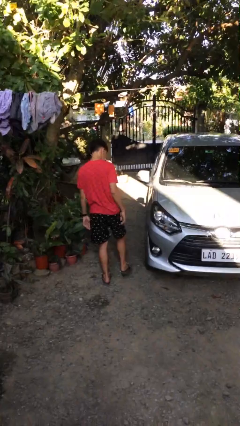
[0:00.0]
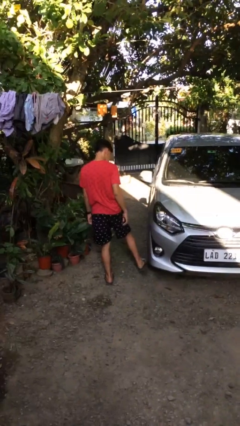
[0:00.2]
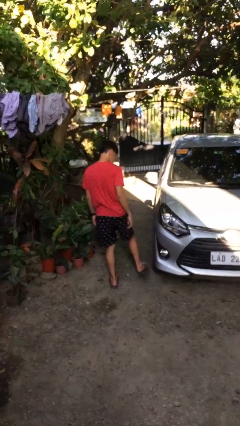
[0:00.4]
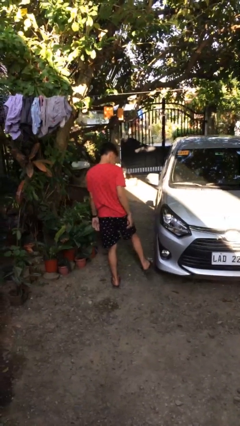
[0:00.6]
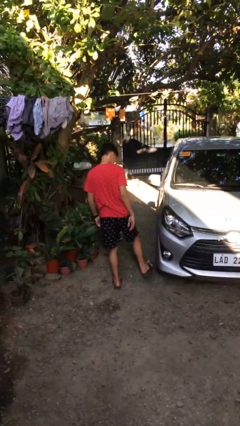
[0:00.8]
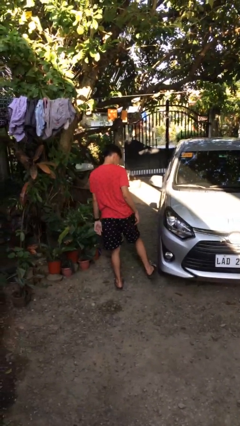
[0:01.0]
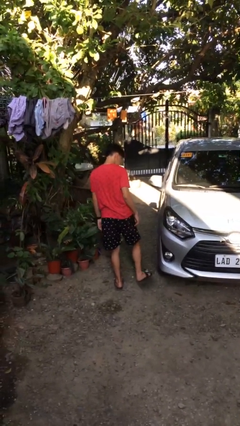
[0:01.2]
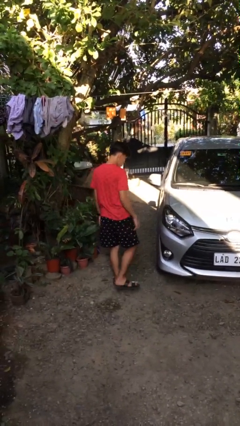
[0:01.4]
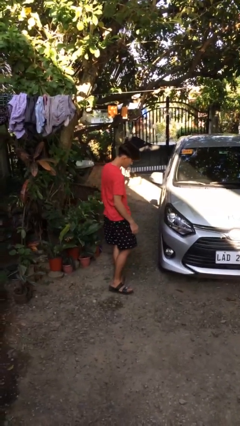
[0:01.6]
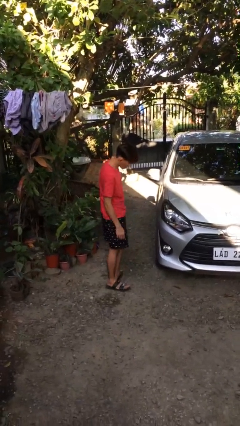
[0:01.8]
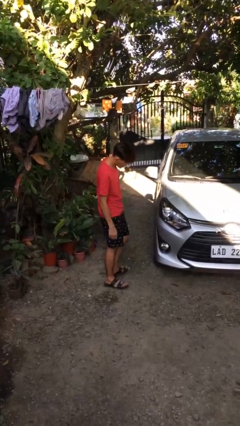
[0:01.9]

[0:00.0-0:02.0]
person kicks car tires

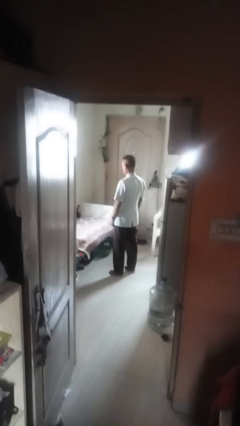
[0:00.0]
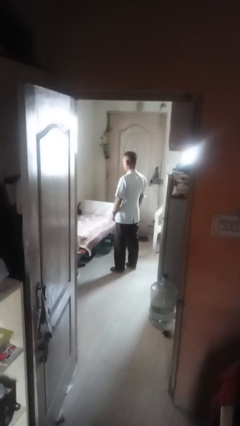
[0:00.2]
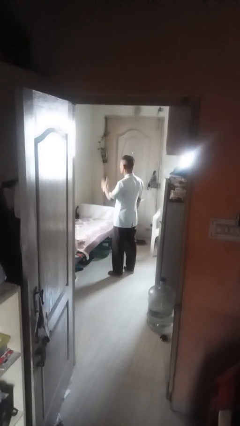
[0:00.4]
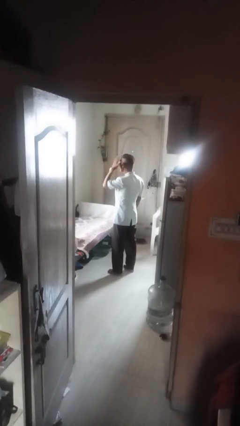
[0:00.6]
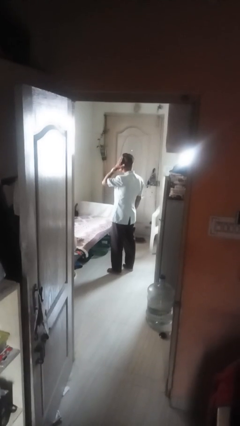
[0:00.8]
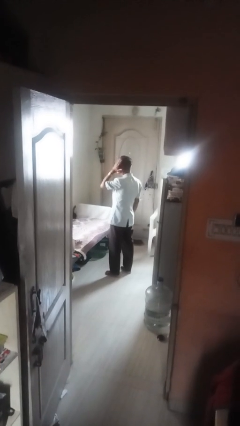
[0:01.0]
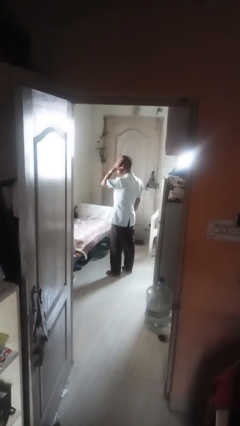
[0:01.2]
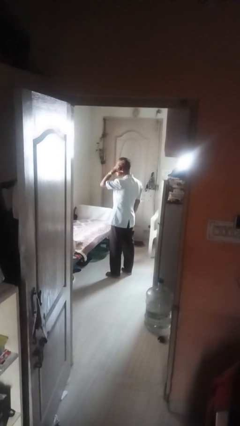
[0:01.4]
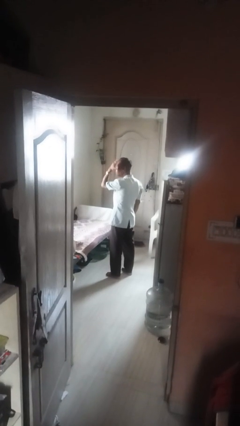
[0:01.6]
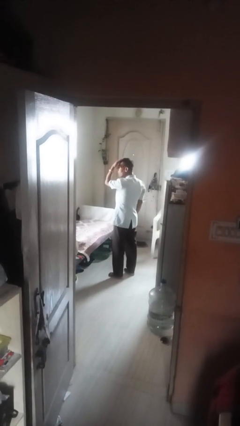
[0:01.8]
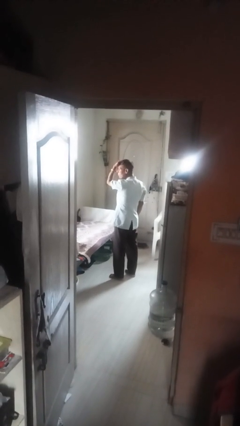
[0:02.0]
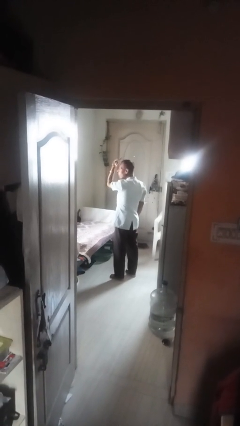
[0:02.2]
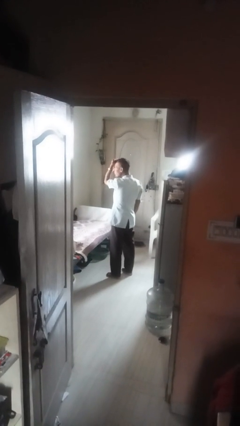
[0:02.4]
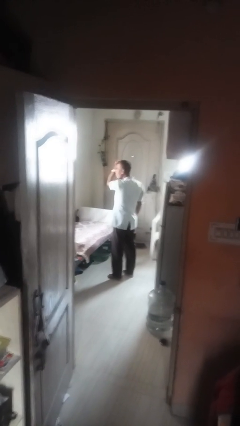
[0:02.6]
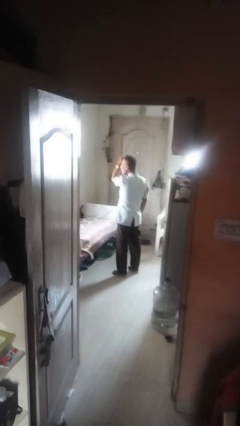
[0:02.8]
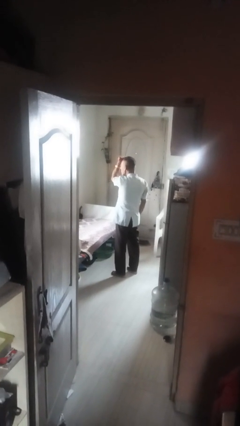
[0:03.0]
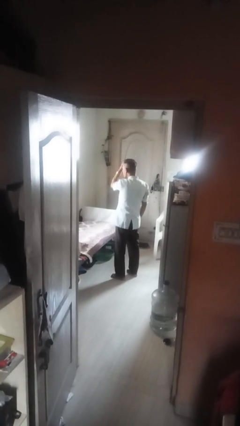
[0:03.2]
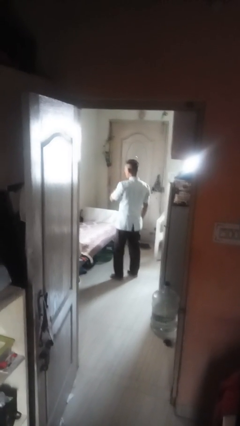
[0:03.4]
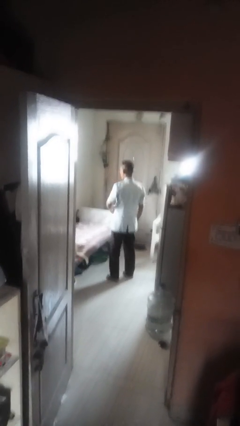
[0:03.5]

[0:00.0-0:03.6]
person strokes hair

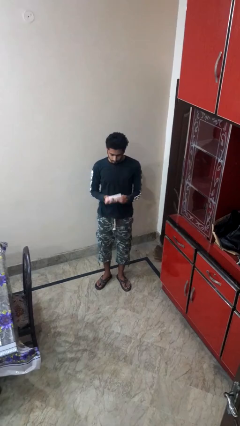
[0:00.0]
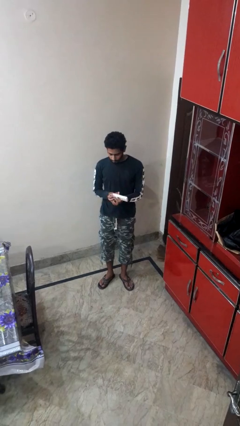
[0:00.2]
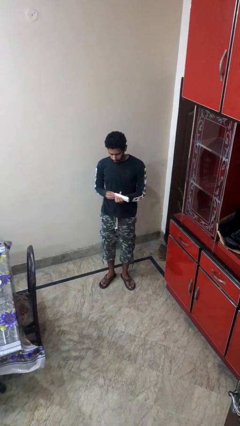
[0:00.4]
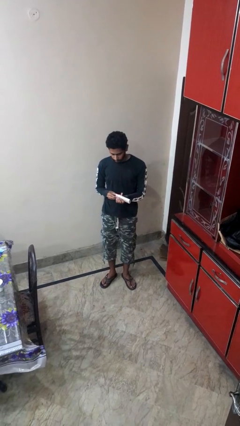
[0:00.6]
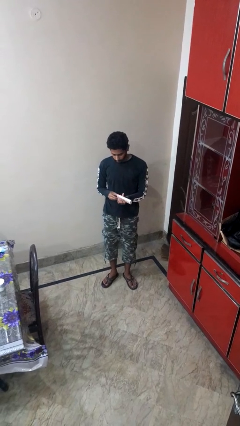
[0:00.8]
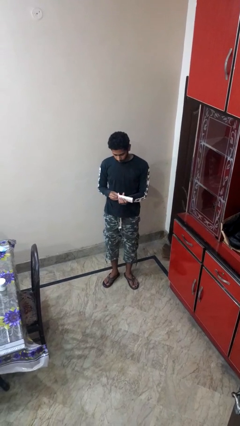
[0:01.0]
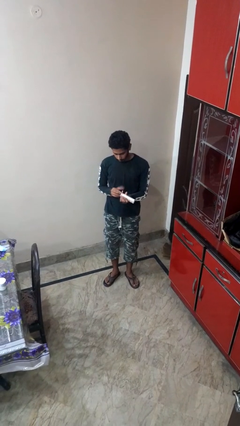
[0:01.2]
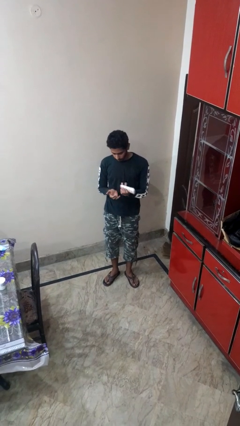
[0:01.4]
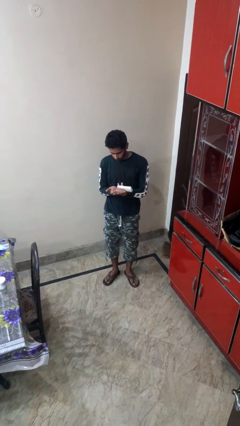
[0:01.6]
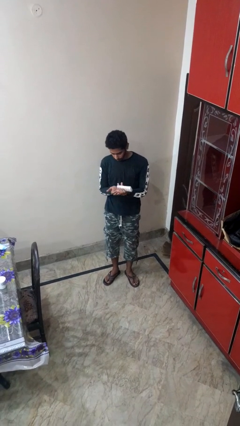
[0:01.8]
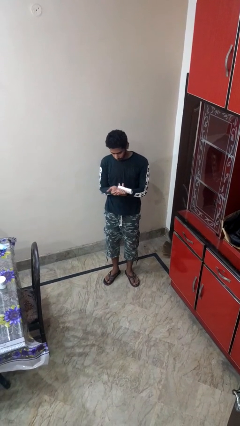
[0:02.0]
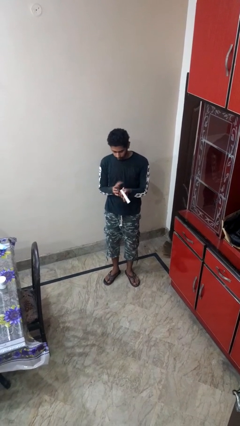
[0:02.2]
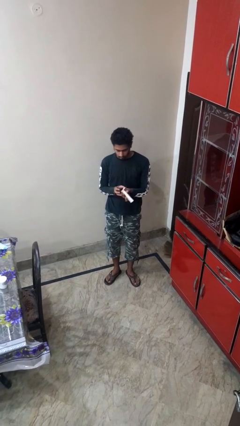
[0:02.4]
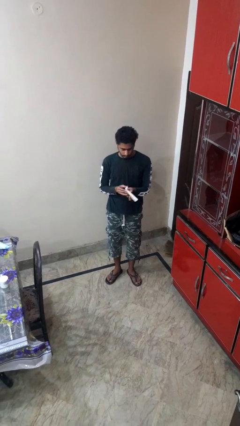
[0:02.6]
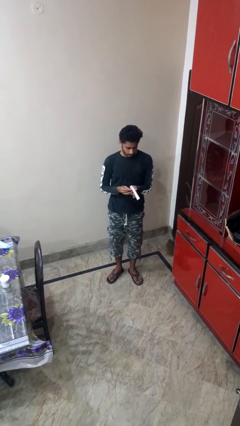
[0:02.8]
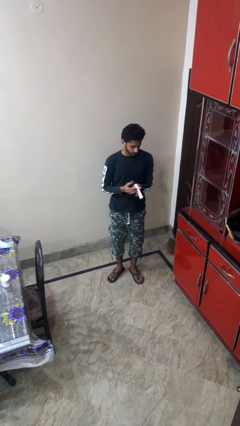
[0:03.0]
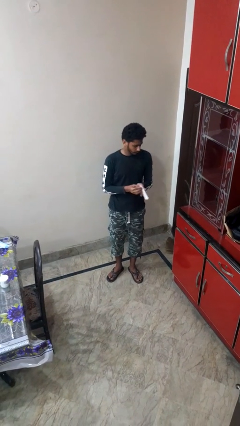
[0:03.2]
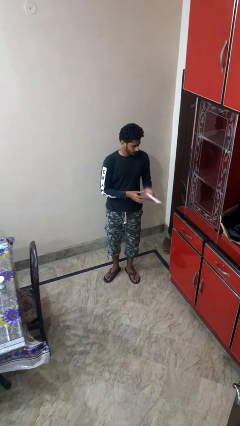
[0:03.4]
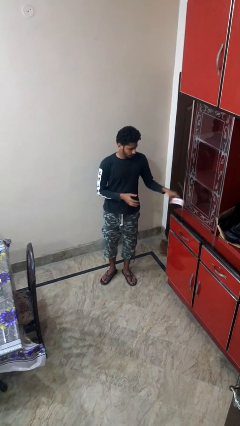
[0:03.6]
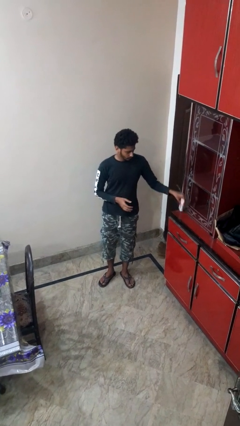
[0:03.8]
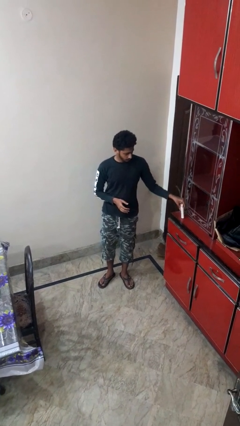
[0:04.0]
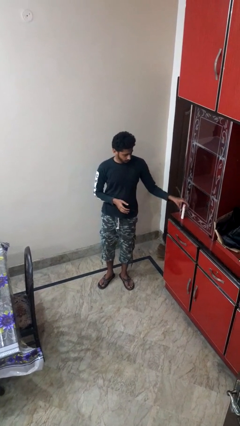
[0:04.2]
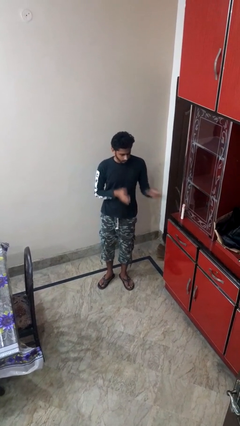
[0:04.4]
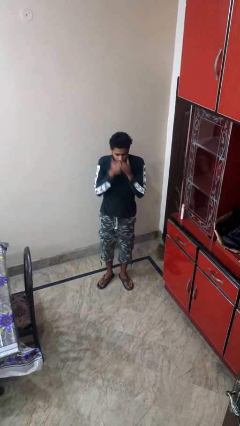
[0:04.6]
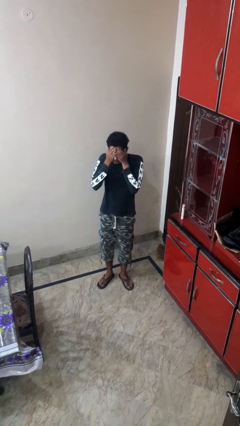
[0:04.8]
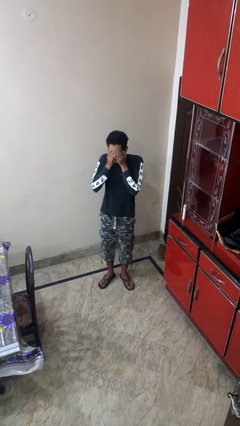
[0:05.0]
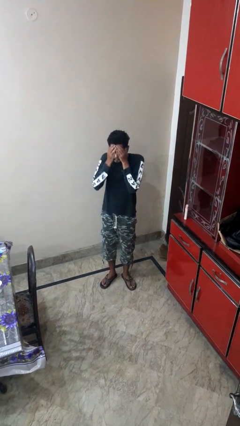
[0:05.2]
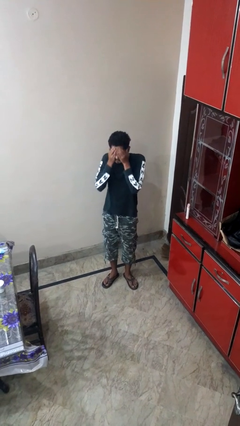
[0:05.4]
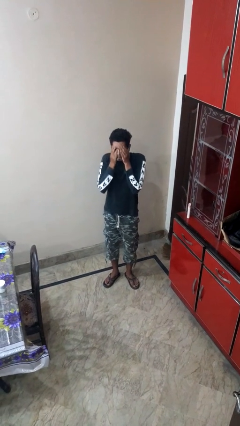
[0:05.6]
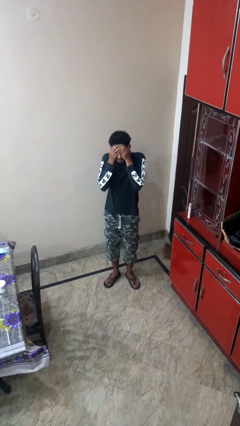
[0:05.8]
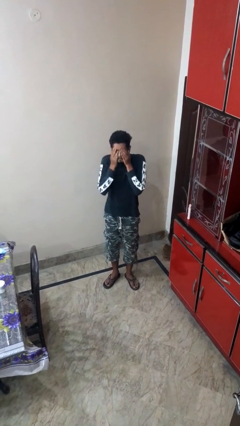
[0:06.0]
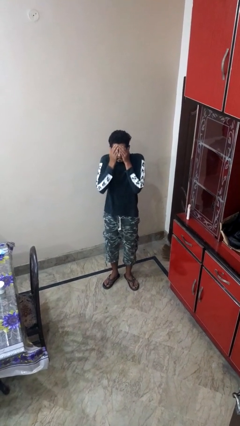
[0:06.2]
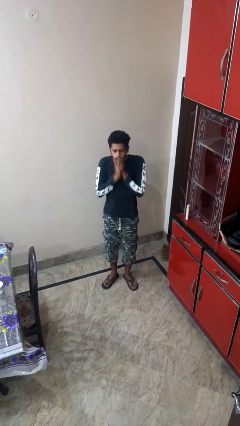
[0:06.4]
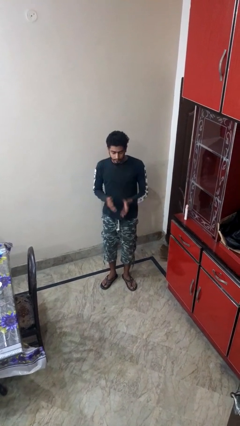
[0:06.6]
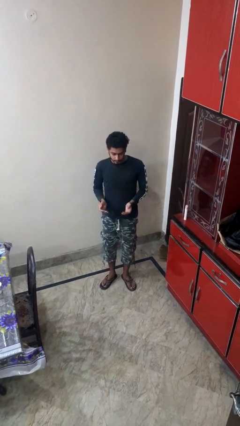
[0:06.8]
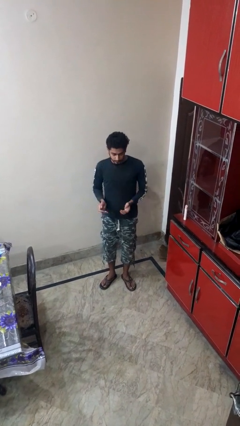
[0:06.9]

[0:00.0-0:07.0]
person applies facial moisturizer

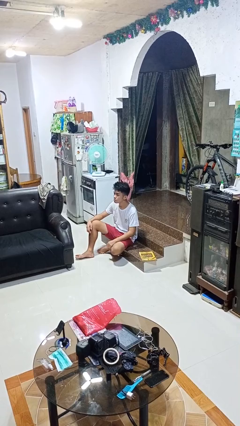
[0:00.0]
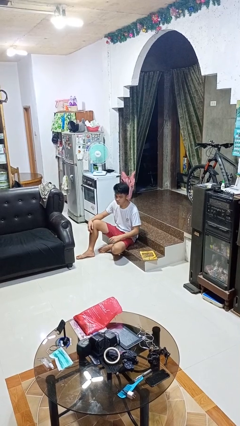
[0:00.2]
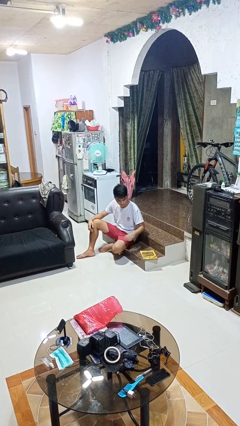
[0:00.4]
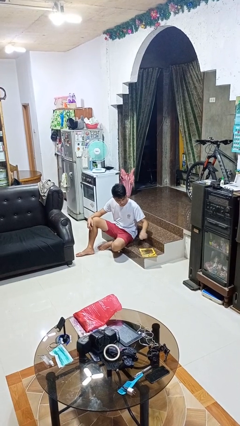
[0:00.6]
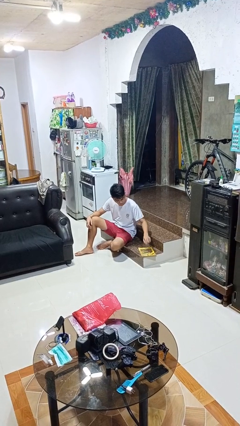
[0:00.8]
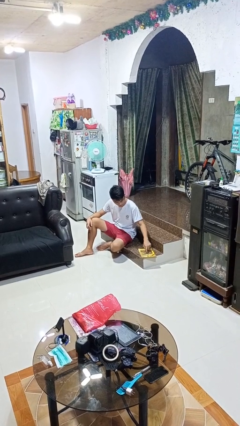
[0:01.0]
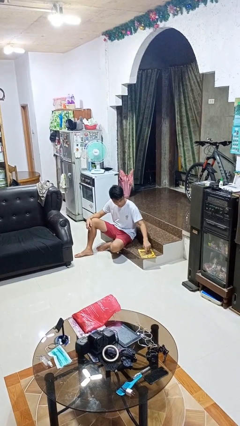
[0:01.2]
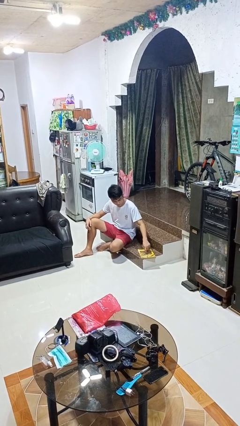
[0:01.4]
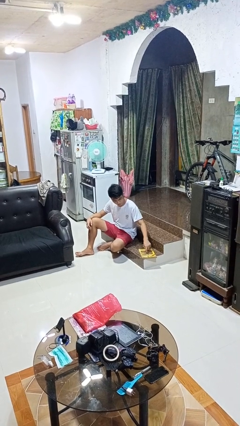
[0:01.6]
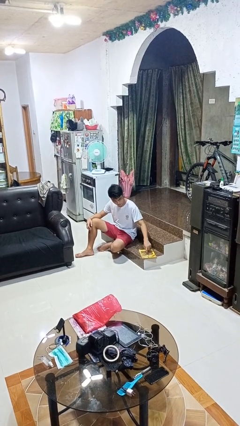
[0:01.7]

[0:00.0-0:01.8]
person taps object with finger

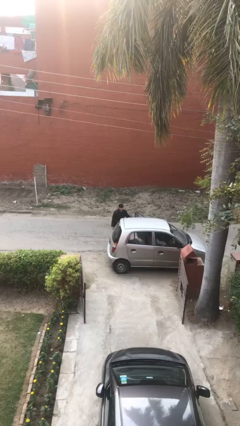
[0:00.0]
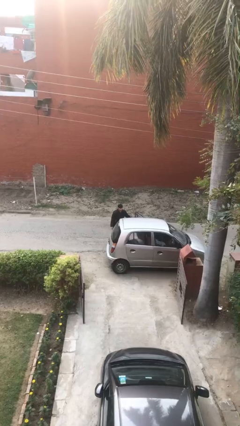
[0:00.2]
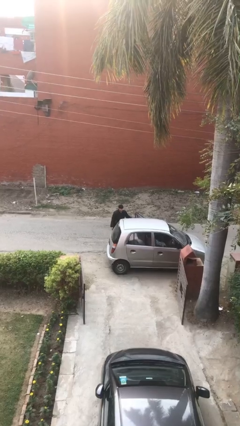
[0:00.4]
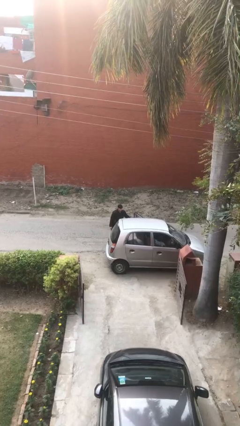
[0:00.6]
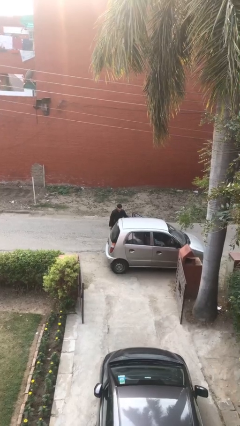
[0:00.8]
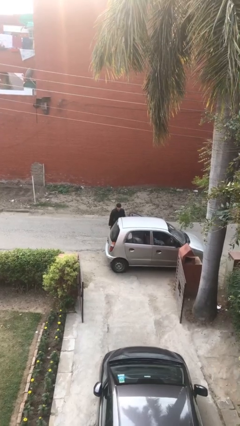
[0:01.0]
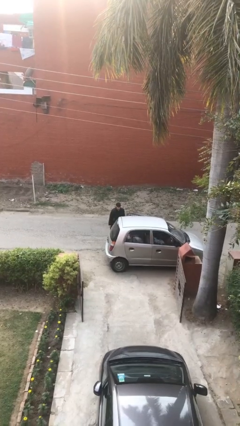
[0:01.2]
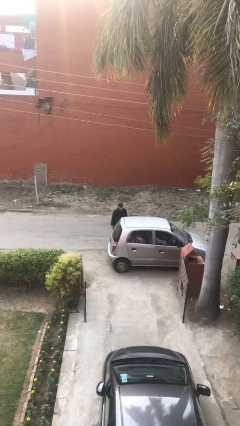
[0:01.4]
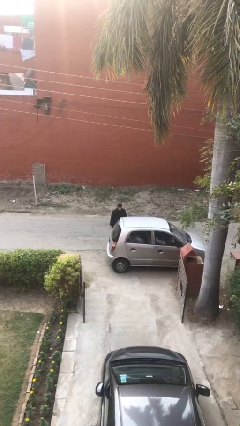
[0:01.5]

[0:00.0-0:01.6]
person closes car door

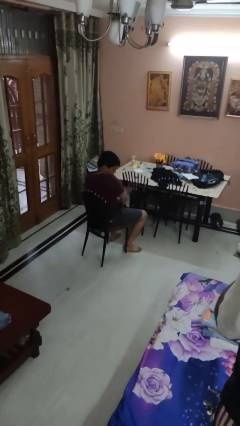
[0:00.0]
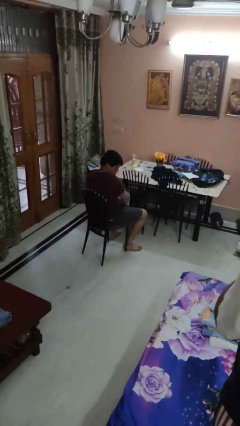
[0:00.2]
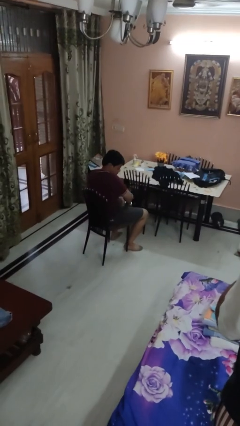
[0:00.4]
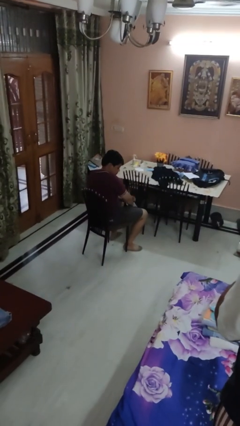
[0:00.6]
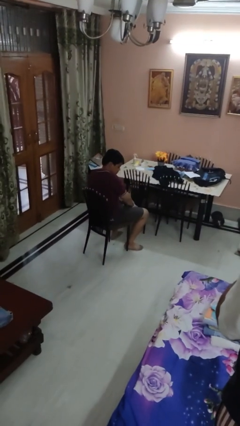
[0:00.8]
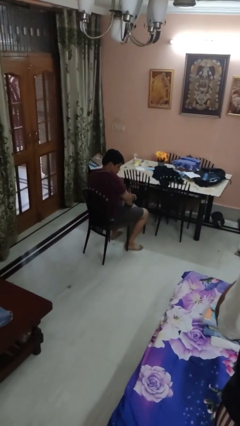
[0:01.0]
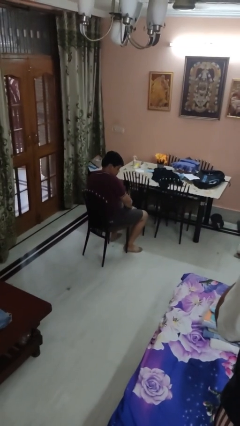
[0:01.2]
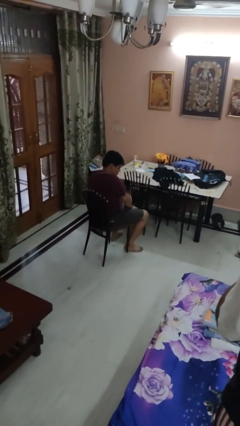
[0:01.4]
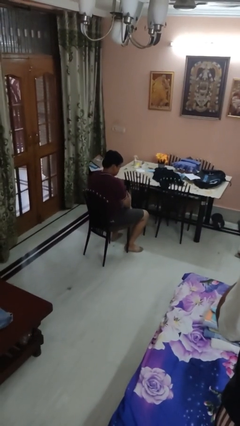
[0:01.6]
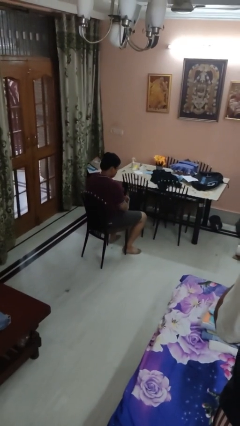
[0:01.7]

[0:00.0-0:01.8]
person swats bug
